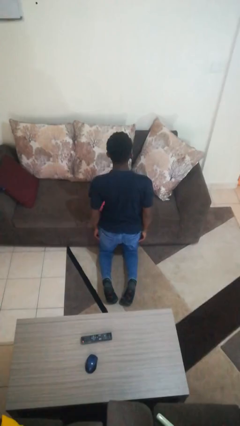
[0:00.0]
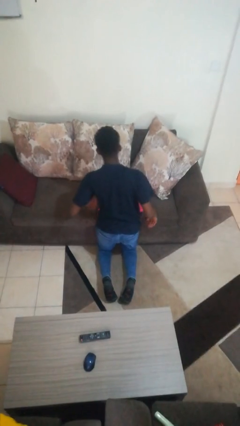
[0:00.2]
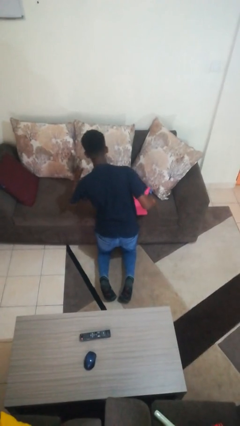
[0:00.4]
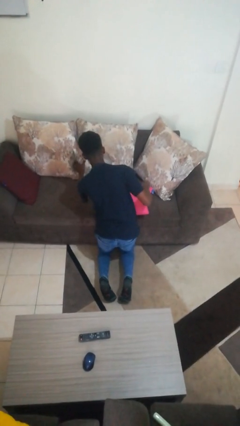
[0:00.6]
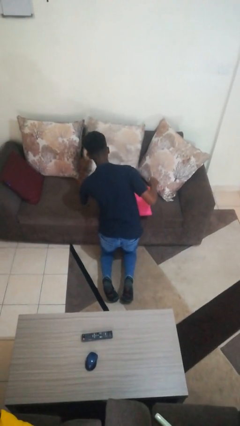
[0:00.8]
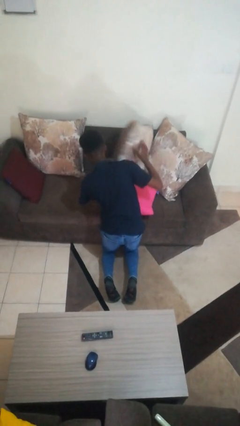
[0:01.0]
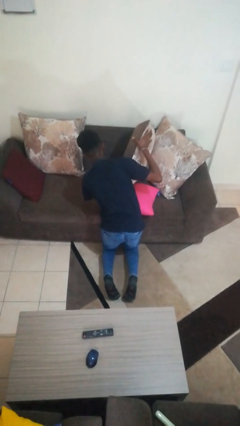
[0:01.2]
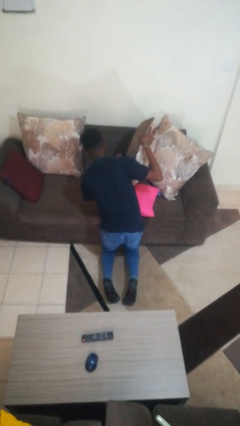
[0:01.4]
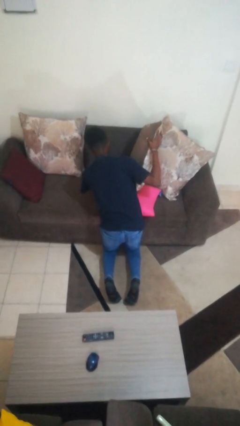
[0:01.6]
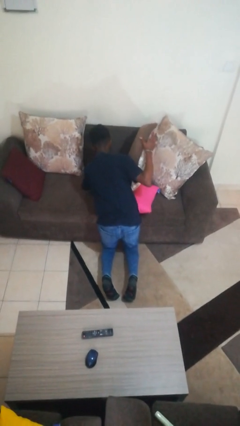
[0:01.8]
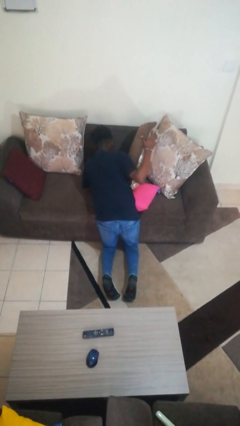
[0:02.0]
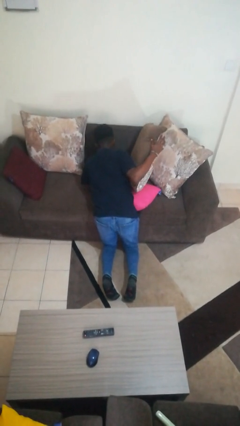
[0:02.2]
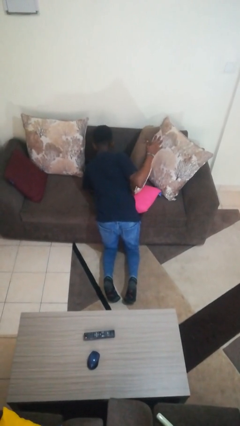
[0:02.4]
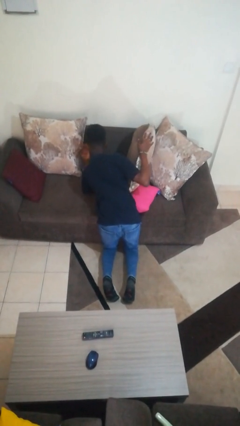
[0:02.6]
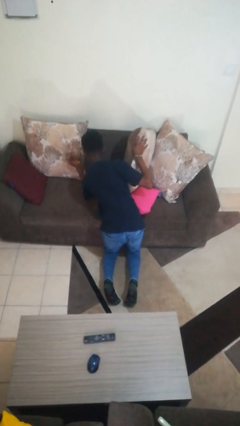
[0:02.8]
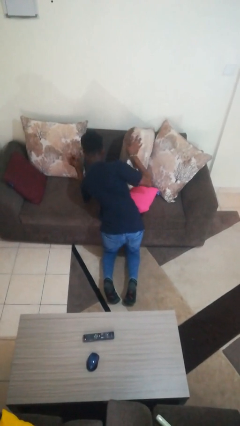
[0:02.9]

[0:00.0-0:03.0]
person searches in couch

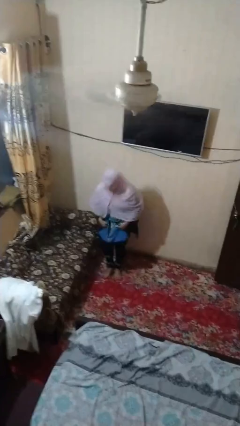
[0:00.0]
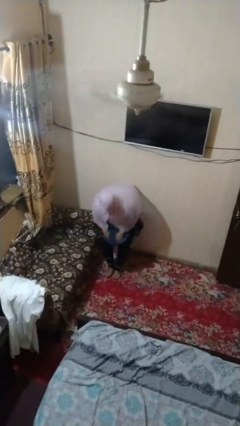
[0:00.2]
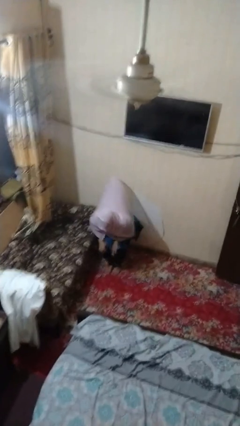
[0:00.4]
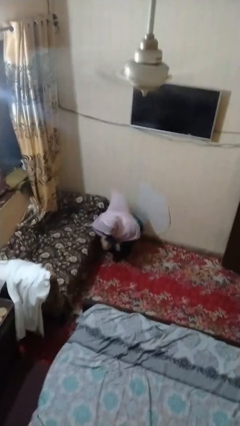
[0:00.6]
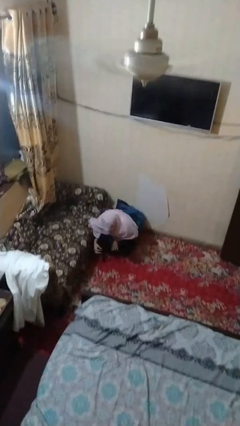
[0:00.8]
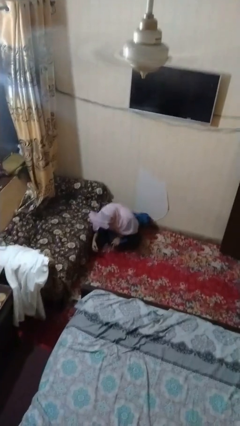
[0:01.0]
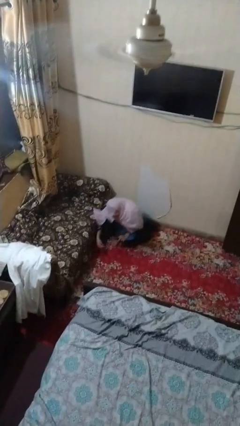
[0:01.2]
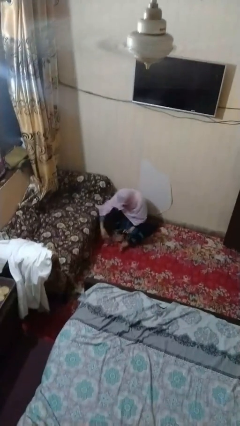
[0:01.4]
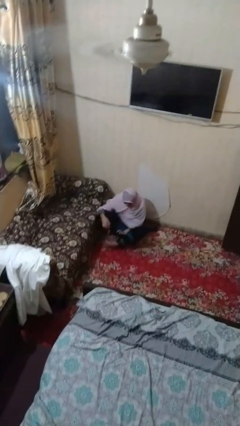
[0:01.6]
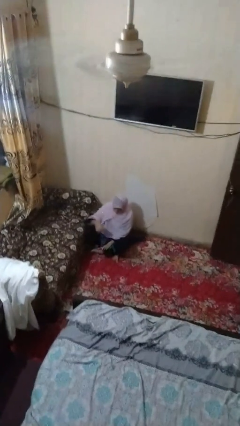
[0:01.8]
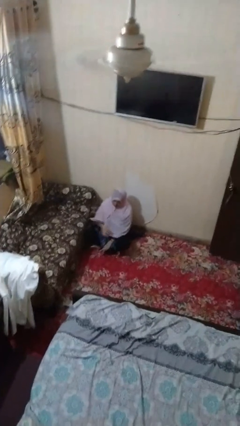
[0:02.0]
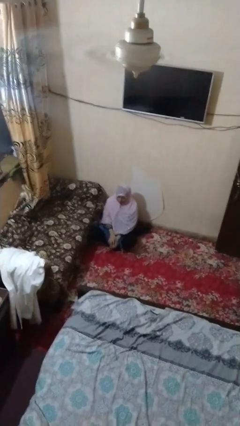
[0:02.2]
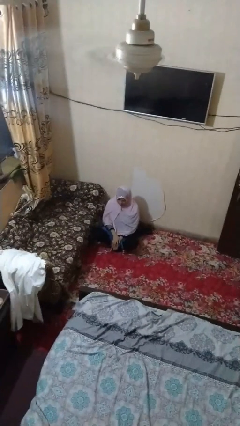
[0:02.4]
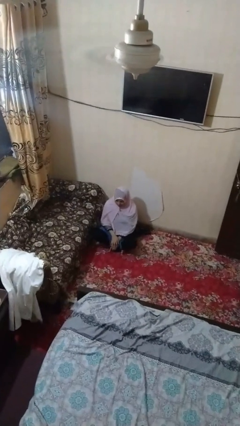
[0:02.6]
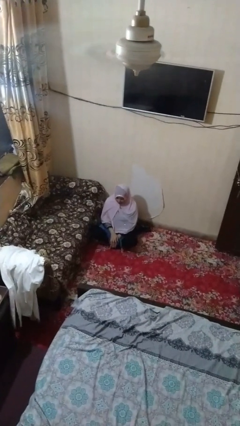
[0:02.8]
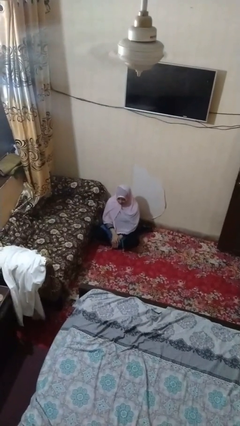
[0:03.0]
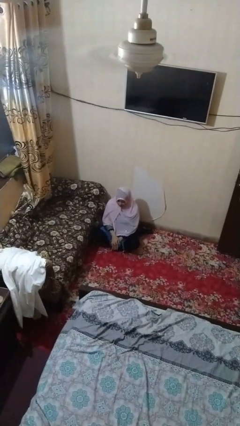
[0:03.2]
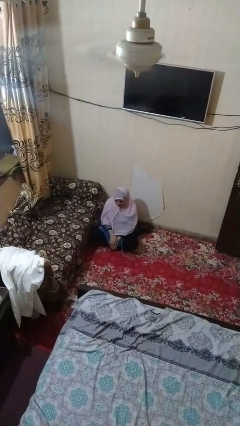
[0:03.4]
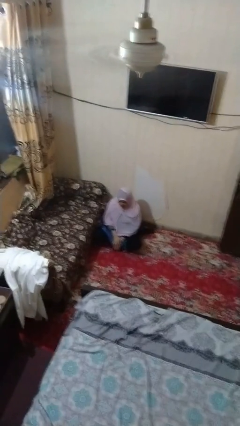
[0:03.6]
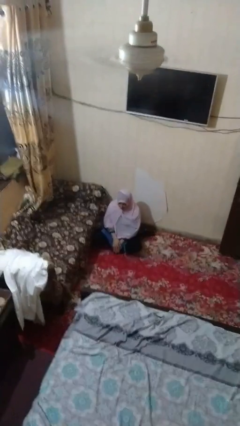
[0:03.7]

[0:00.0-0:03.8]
person sits crisscross

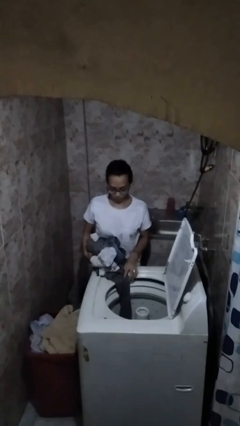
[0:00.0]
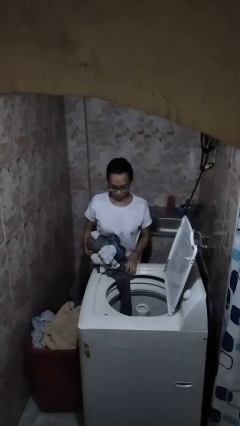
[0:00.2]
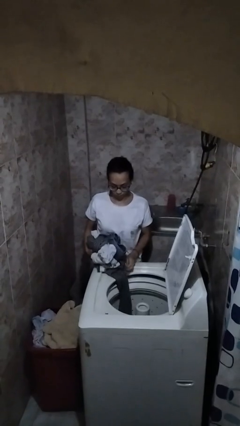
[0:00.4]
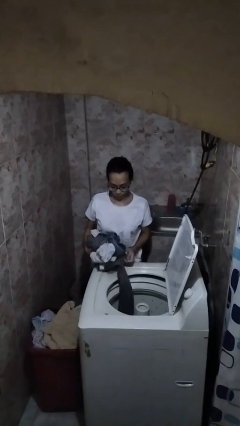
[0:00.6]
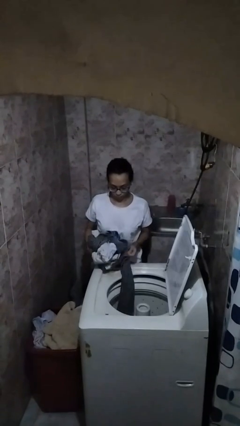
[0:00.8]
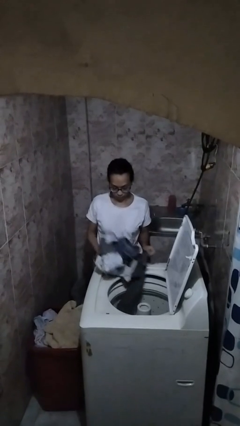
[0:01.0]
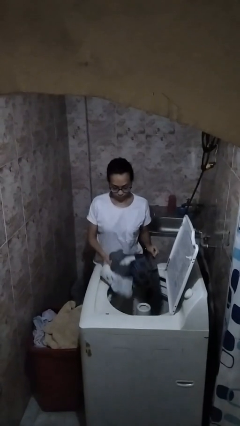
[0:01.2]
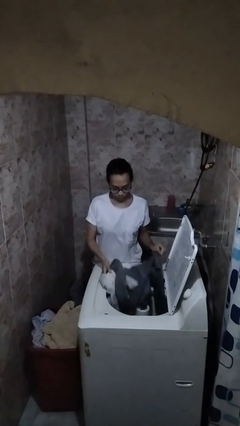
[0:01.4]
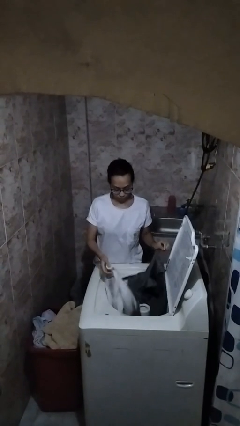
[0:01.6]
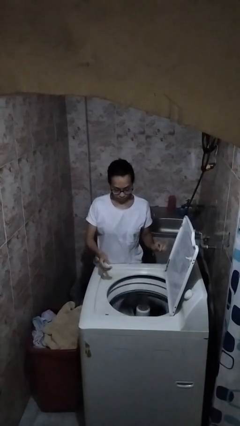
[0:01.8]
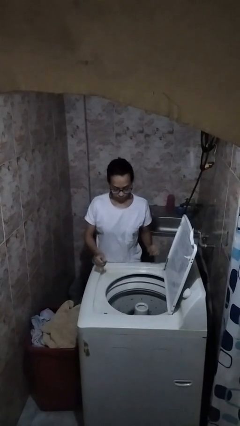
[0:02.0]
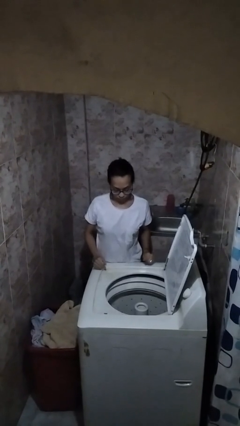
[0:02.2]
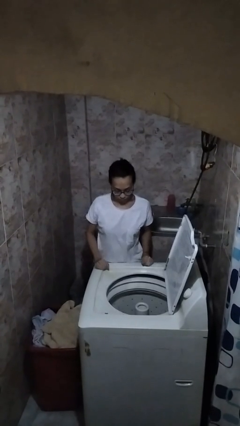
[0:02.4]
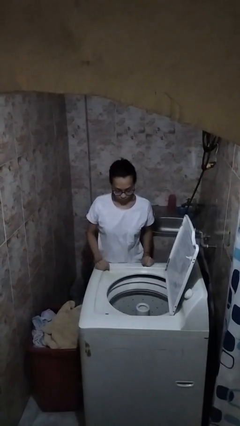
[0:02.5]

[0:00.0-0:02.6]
person unloads clotheswasher

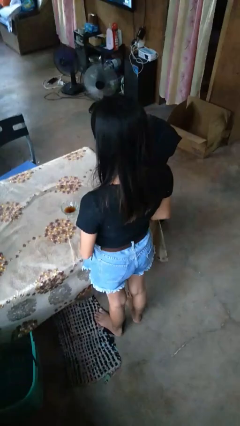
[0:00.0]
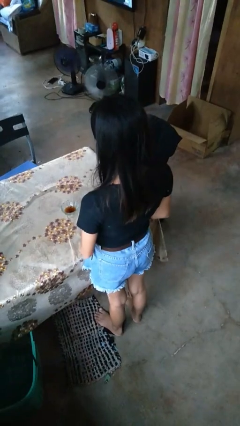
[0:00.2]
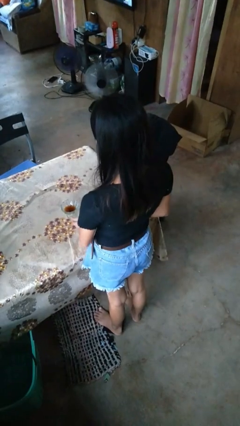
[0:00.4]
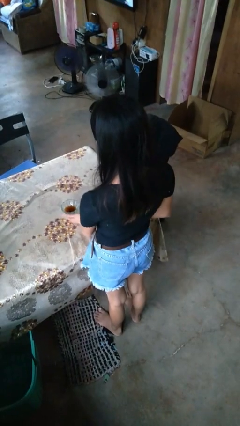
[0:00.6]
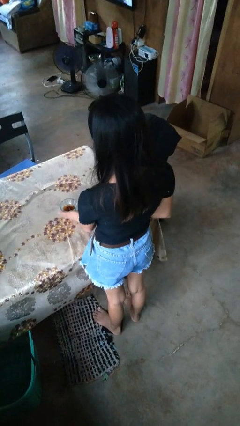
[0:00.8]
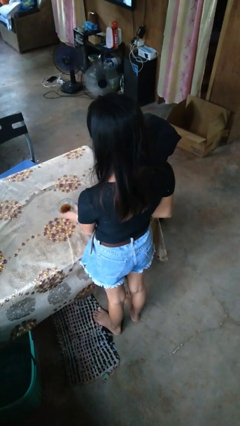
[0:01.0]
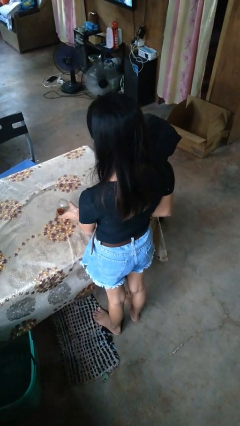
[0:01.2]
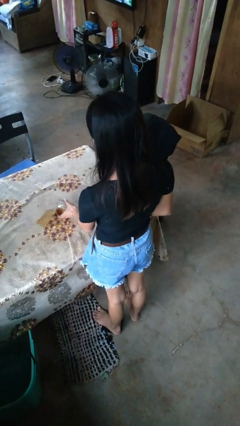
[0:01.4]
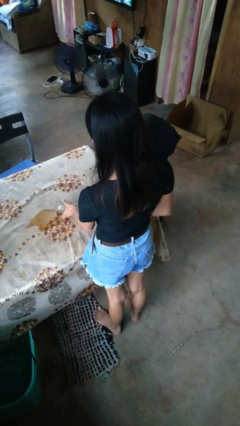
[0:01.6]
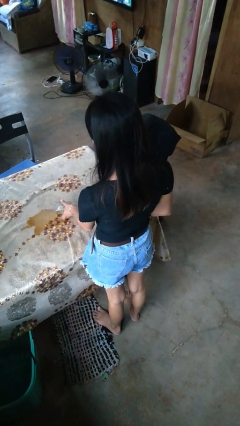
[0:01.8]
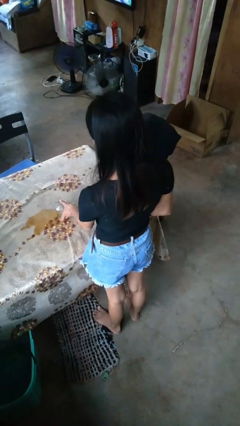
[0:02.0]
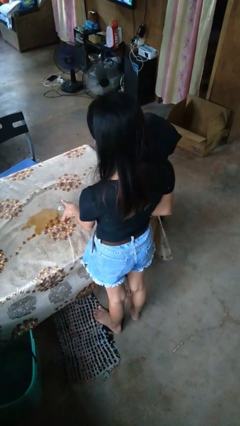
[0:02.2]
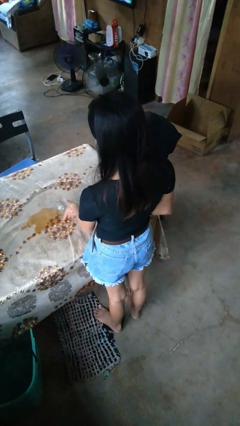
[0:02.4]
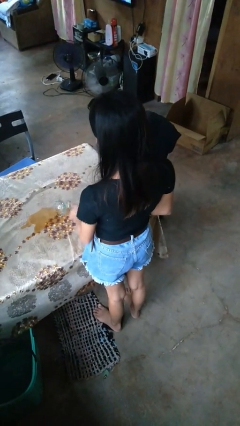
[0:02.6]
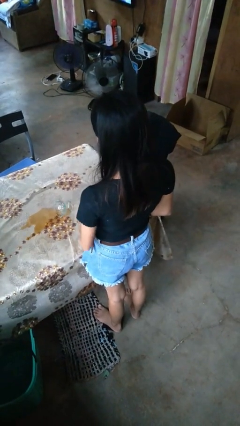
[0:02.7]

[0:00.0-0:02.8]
person spills on table

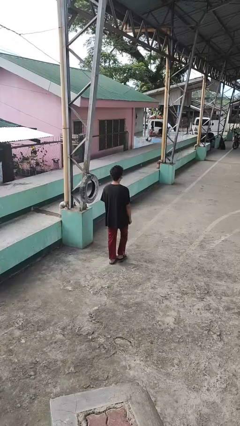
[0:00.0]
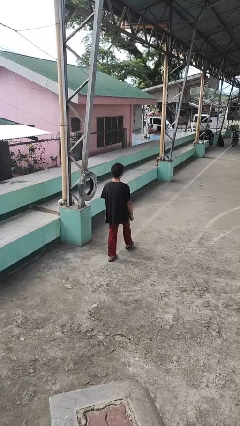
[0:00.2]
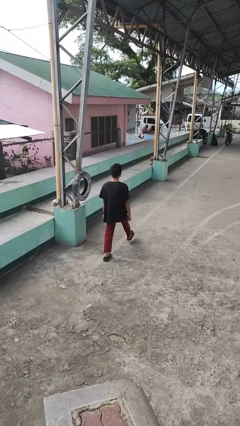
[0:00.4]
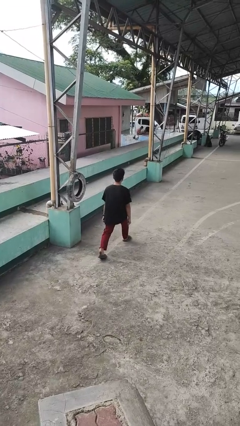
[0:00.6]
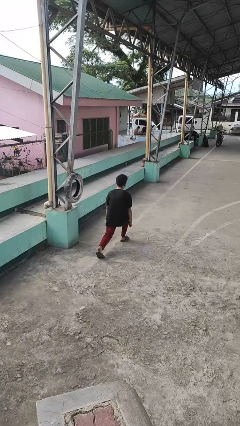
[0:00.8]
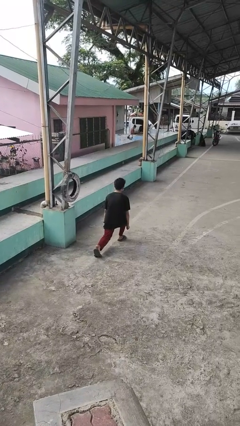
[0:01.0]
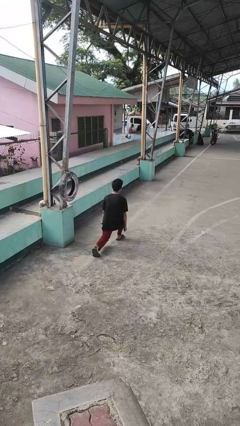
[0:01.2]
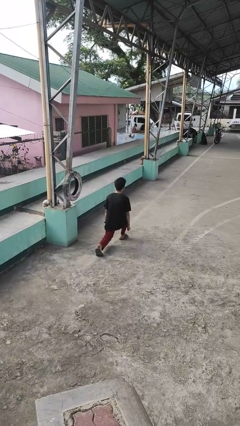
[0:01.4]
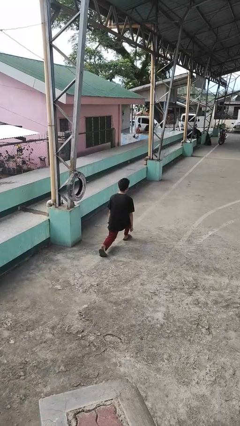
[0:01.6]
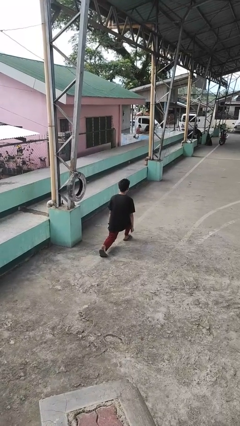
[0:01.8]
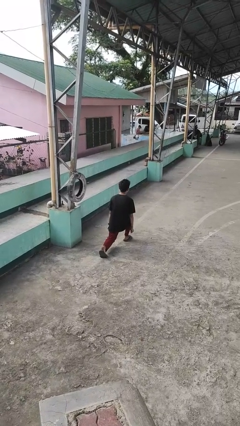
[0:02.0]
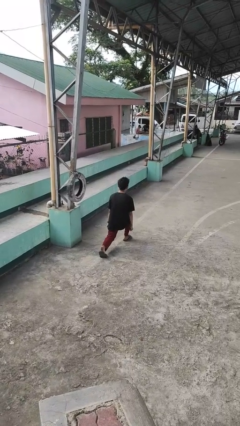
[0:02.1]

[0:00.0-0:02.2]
person exercises with lunges

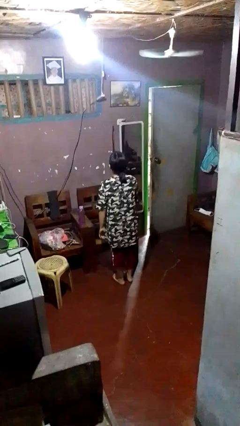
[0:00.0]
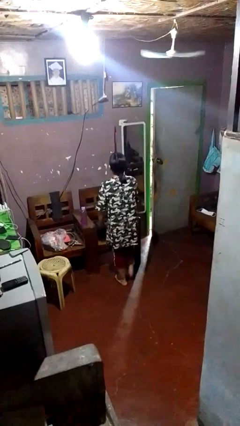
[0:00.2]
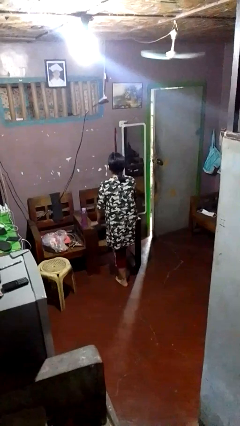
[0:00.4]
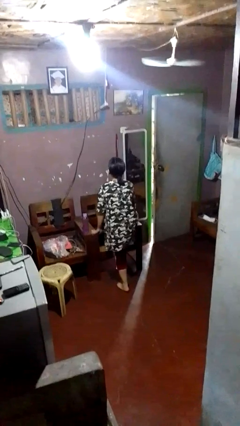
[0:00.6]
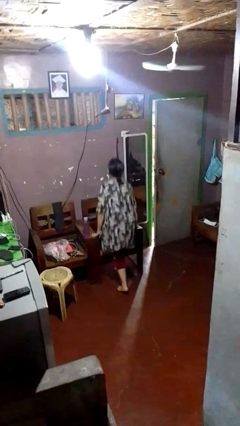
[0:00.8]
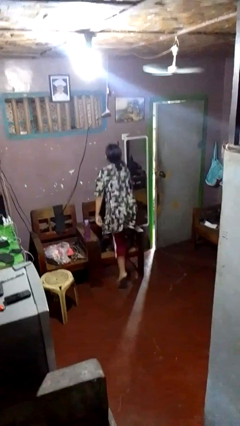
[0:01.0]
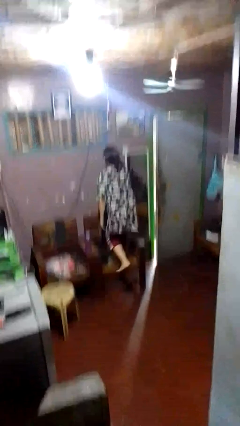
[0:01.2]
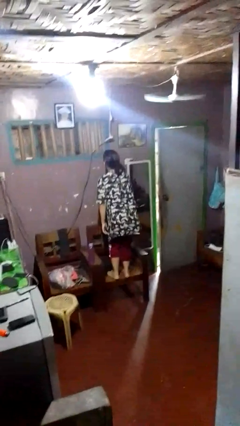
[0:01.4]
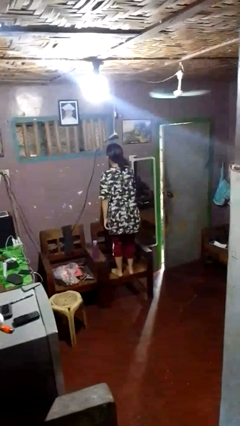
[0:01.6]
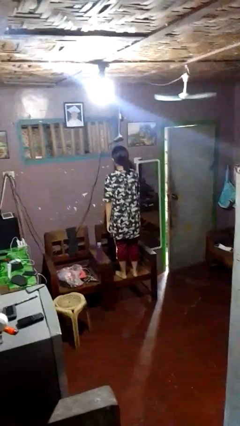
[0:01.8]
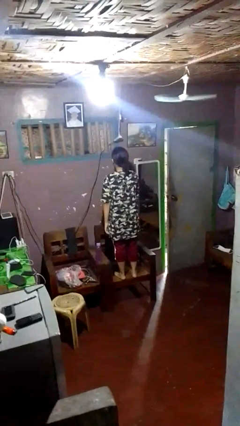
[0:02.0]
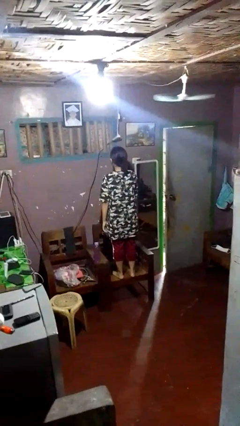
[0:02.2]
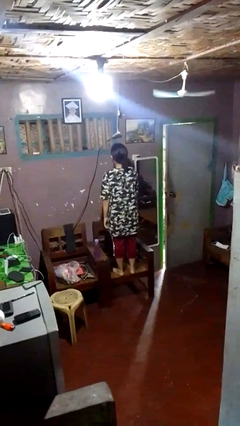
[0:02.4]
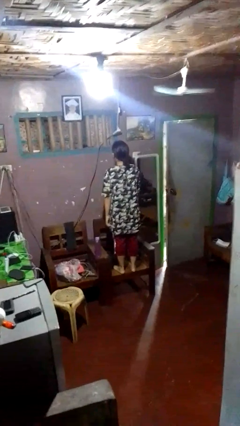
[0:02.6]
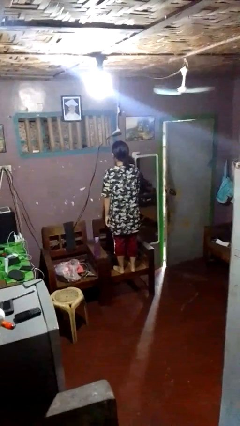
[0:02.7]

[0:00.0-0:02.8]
person climbs on chair
